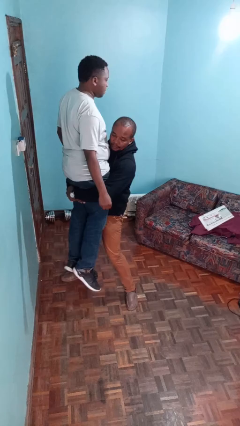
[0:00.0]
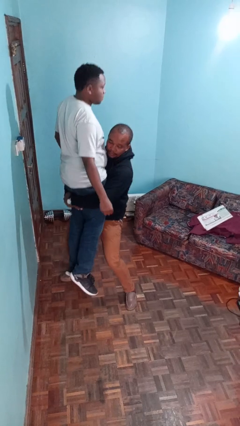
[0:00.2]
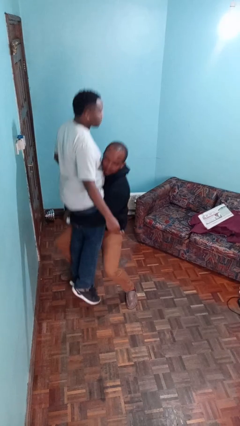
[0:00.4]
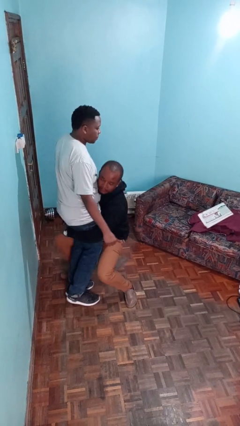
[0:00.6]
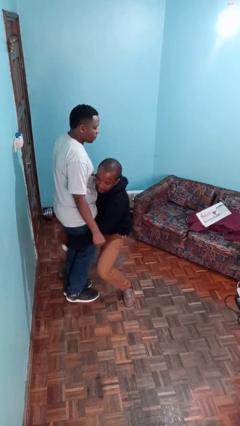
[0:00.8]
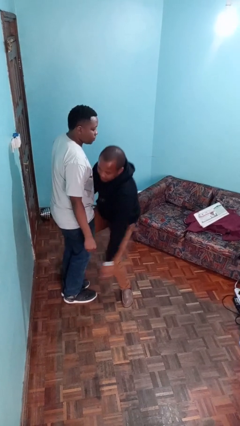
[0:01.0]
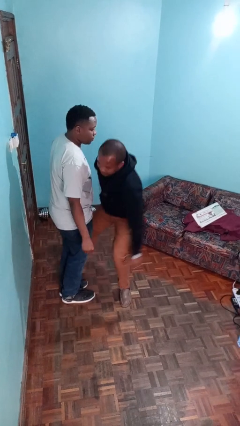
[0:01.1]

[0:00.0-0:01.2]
person puts down person

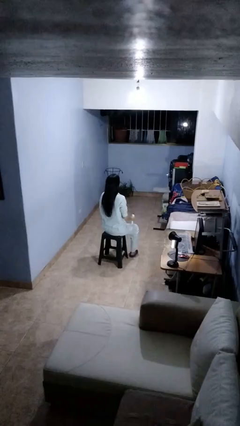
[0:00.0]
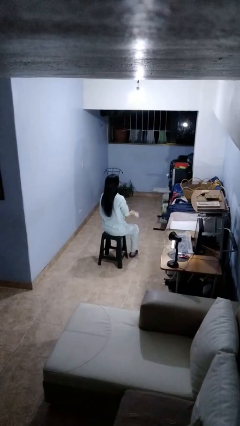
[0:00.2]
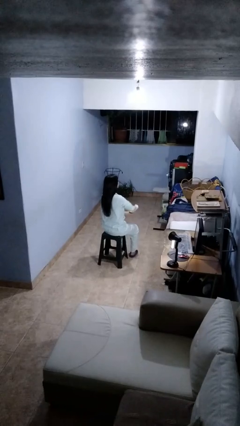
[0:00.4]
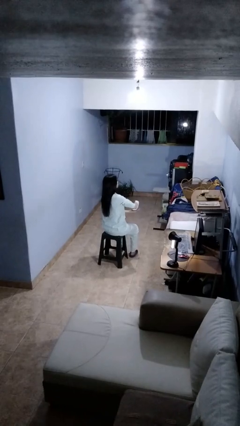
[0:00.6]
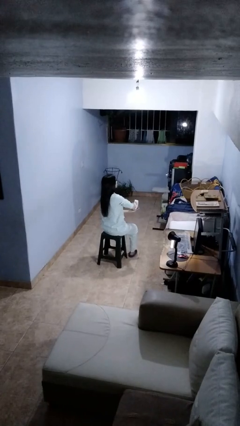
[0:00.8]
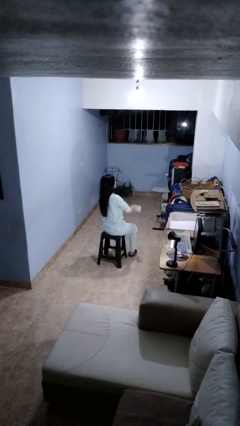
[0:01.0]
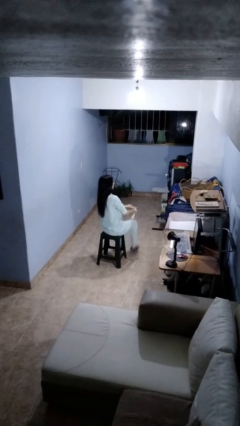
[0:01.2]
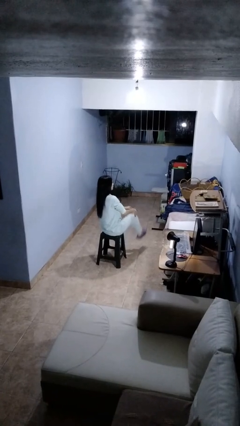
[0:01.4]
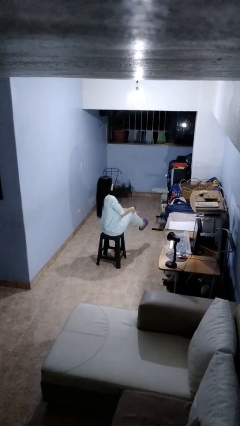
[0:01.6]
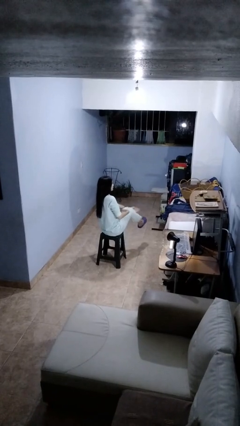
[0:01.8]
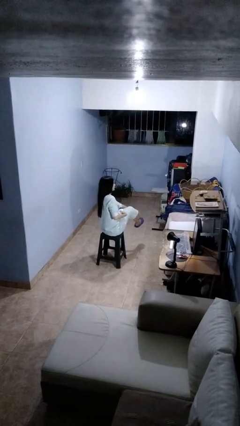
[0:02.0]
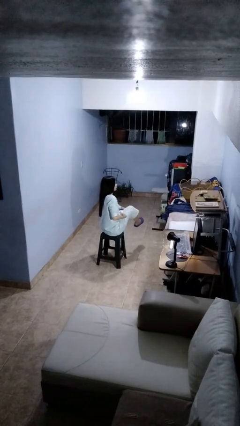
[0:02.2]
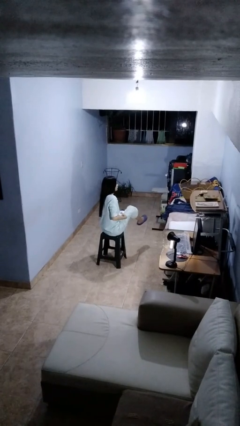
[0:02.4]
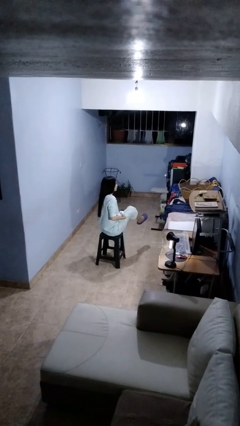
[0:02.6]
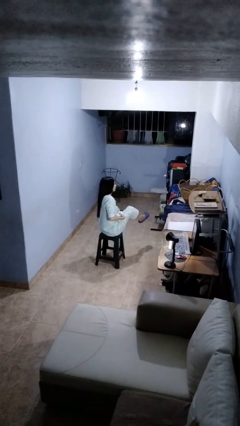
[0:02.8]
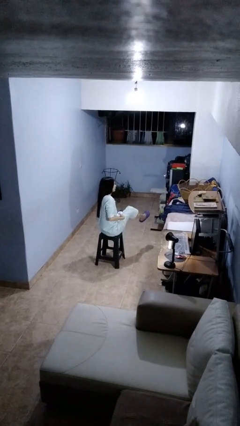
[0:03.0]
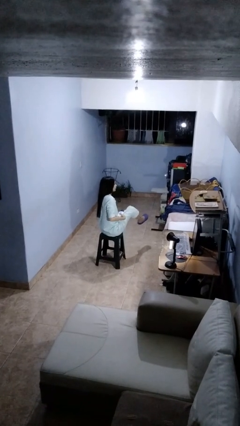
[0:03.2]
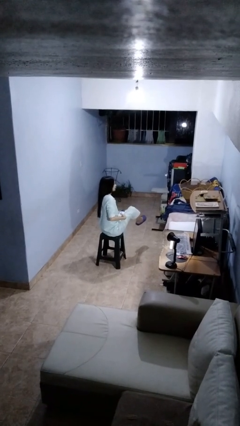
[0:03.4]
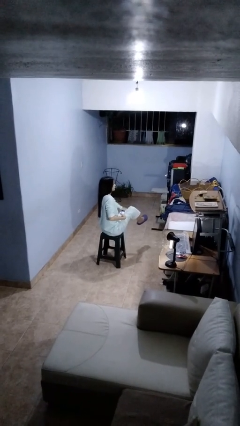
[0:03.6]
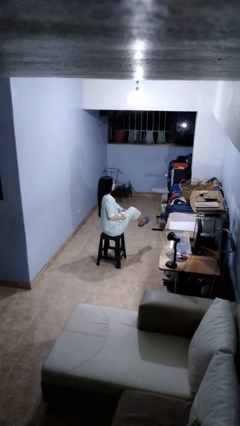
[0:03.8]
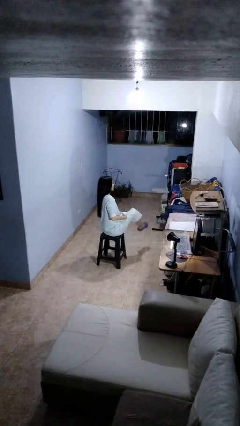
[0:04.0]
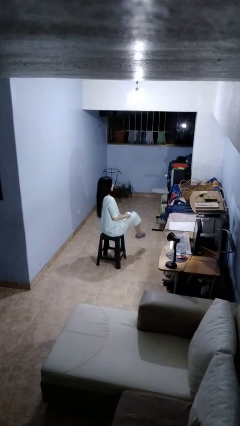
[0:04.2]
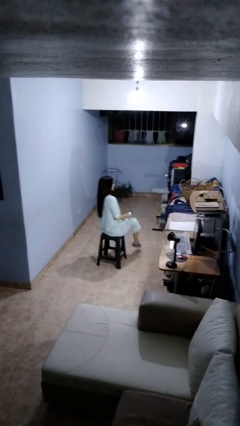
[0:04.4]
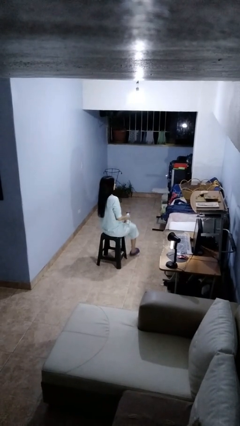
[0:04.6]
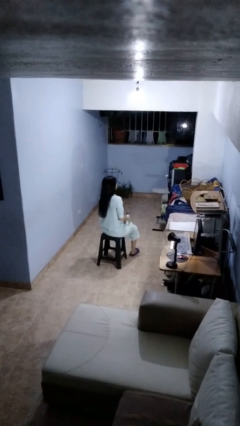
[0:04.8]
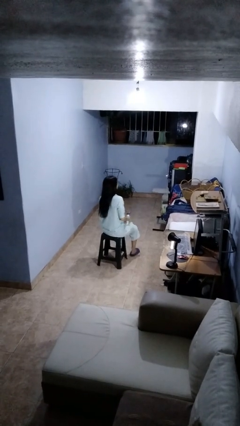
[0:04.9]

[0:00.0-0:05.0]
person applies sunscreen

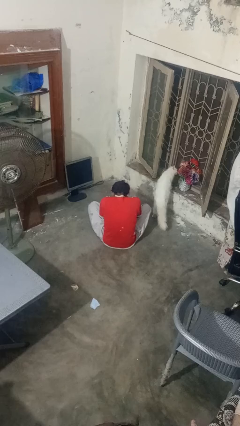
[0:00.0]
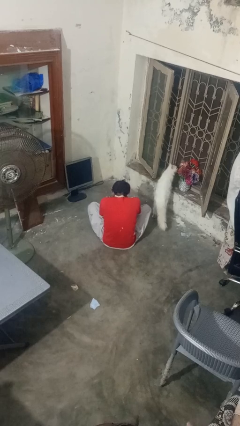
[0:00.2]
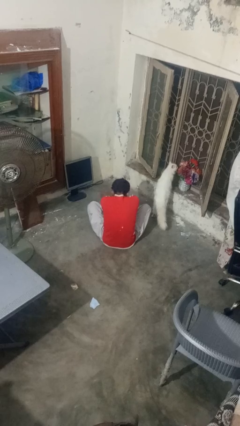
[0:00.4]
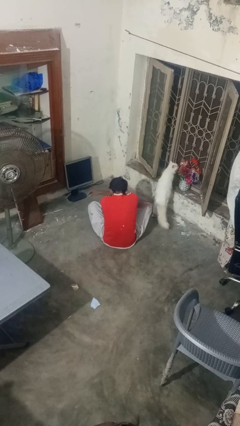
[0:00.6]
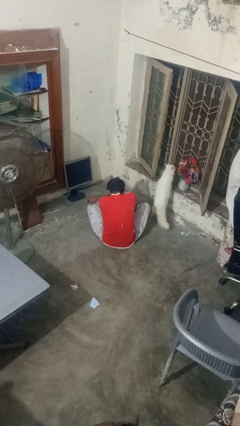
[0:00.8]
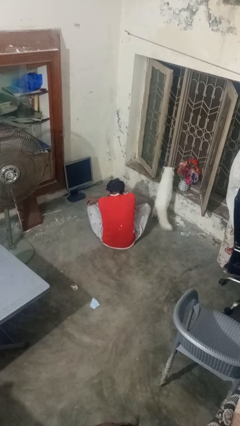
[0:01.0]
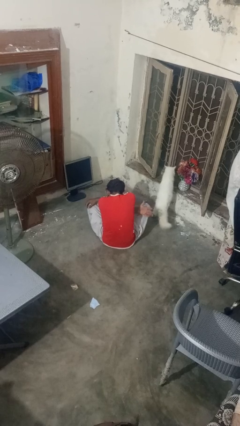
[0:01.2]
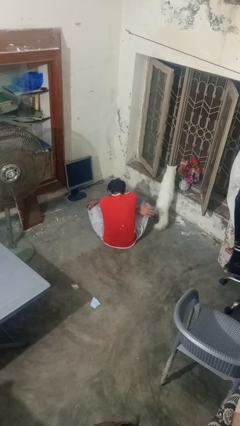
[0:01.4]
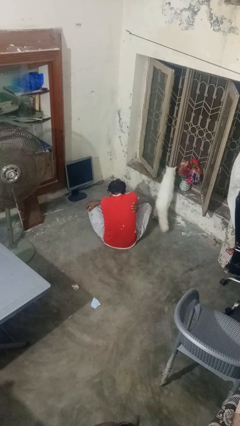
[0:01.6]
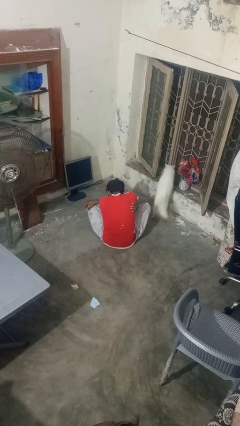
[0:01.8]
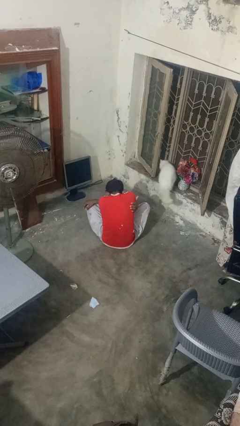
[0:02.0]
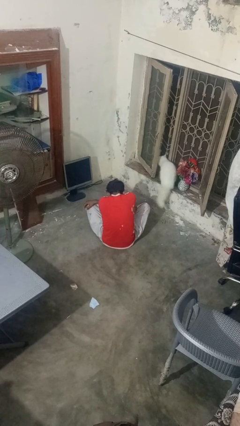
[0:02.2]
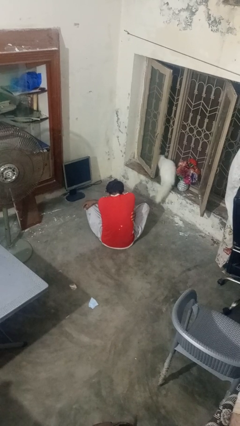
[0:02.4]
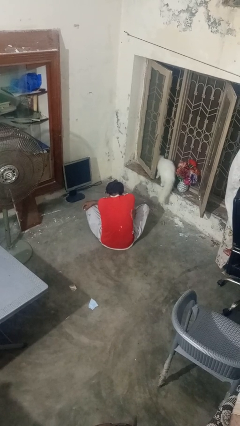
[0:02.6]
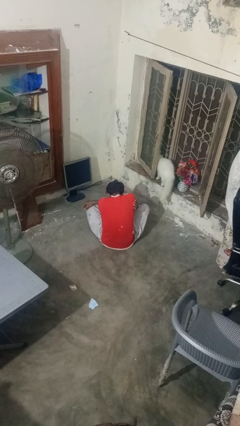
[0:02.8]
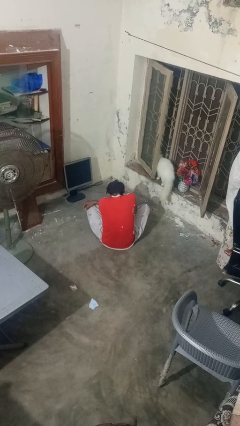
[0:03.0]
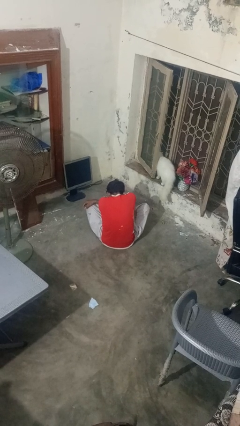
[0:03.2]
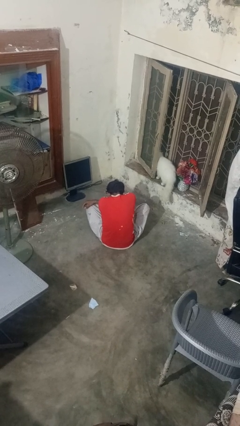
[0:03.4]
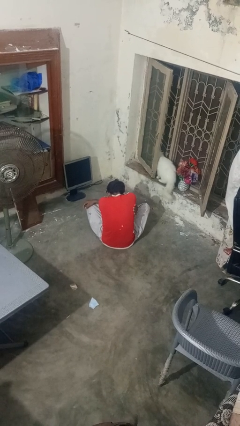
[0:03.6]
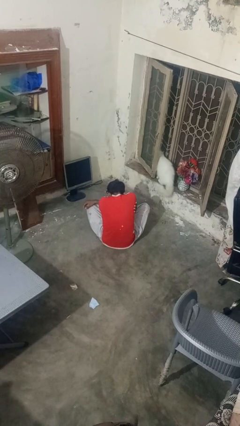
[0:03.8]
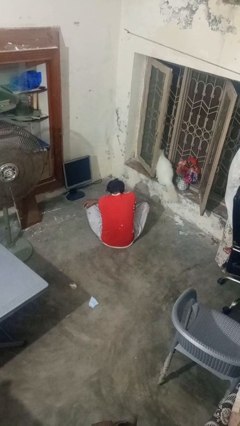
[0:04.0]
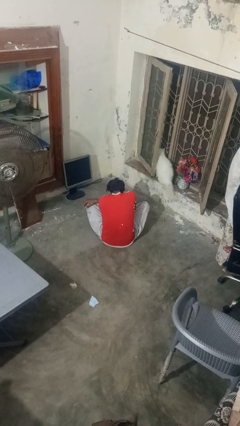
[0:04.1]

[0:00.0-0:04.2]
person swats bug

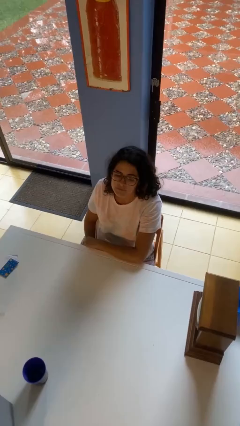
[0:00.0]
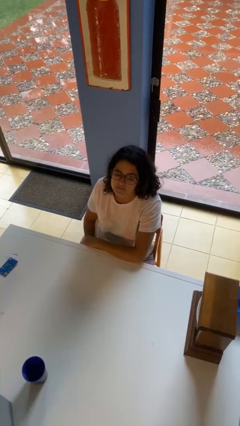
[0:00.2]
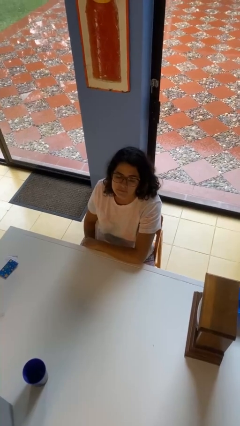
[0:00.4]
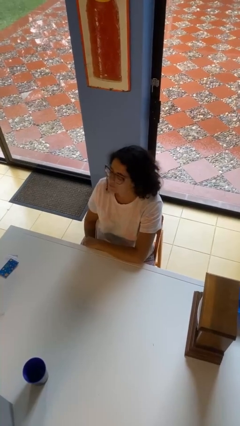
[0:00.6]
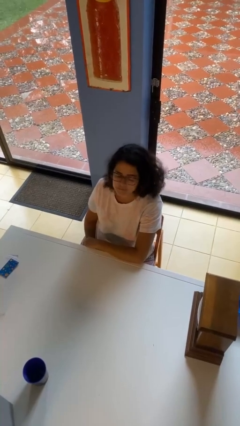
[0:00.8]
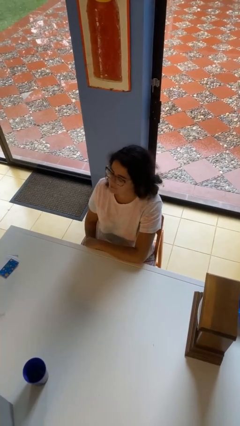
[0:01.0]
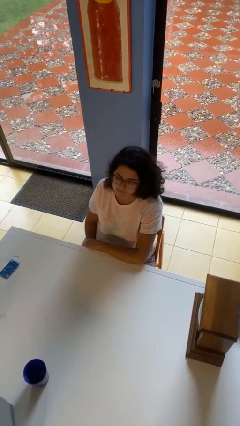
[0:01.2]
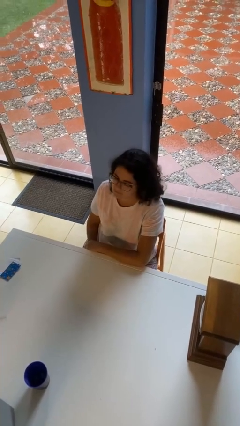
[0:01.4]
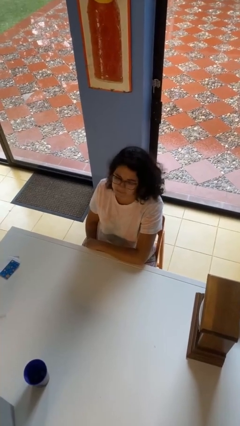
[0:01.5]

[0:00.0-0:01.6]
person shakes head

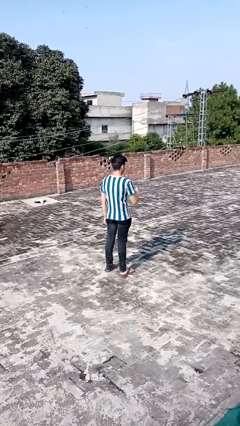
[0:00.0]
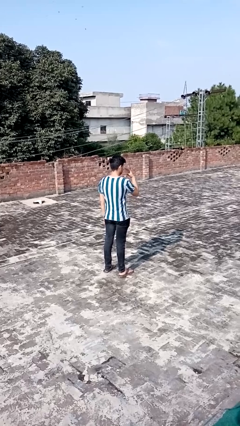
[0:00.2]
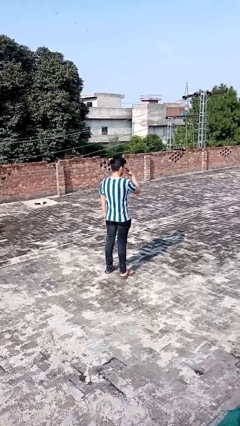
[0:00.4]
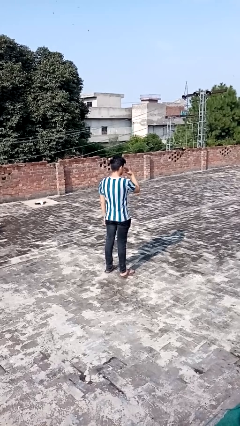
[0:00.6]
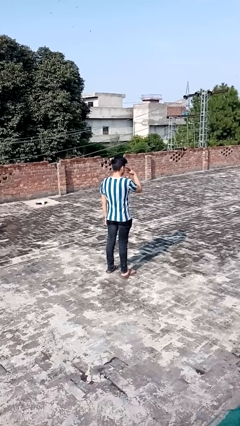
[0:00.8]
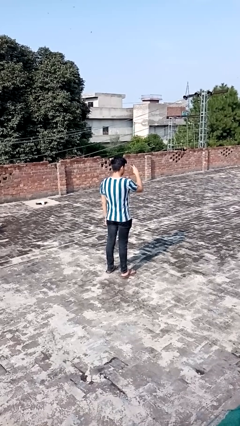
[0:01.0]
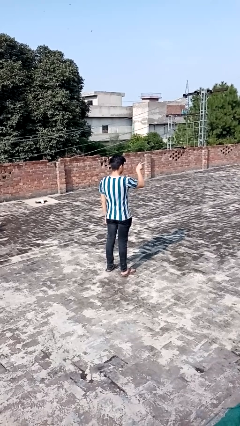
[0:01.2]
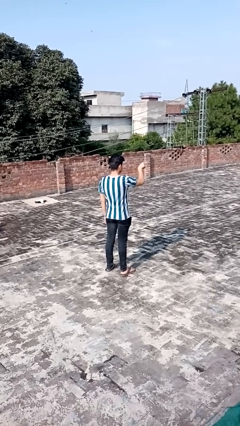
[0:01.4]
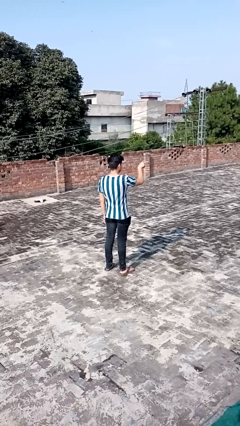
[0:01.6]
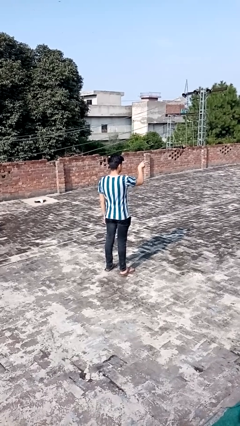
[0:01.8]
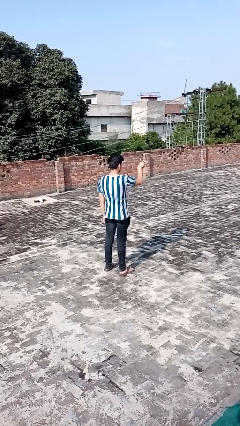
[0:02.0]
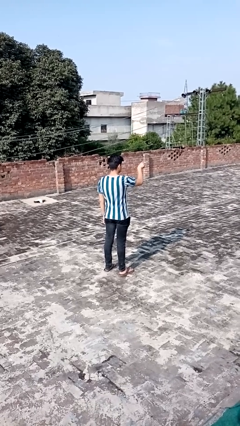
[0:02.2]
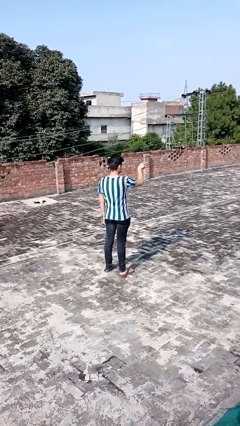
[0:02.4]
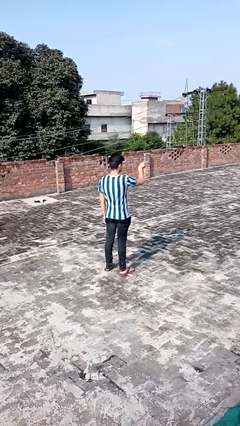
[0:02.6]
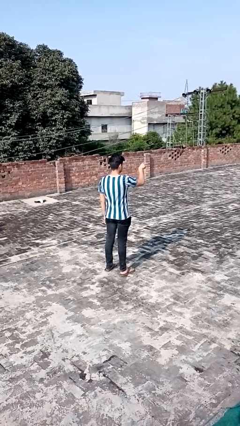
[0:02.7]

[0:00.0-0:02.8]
person gestures watch closely

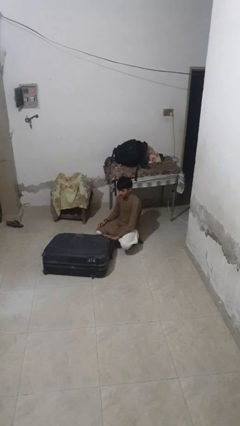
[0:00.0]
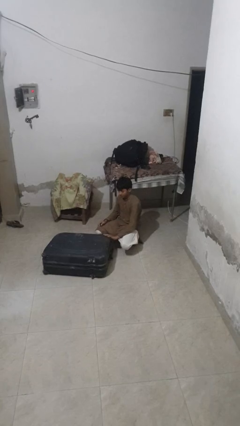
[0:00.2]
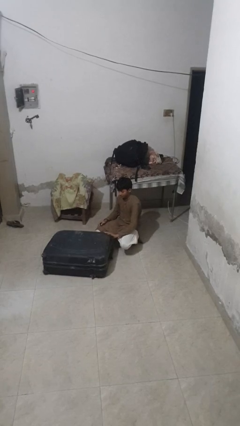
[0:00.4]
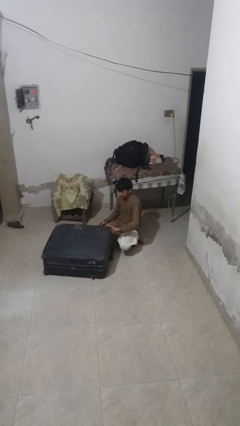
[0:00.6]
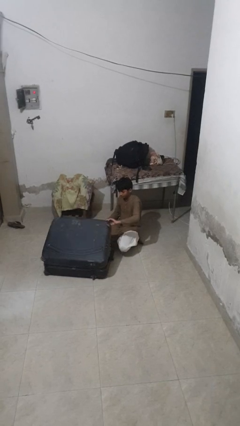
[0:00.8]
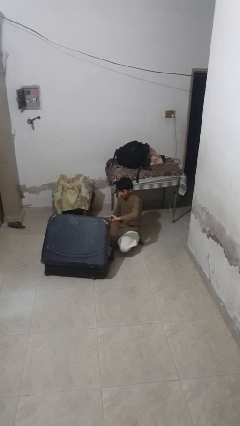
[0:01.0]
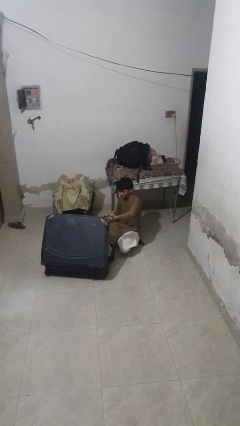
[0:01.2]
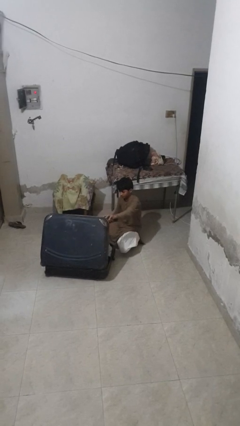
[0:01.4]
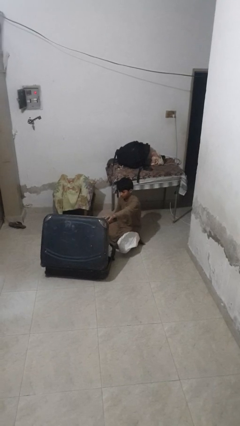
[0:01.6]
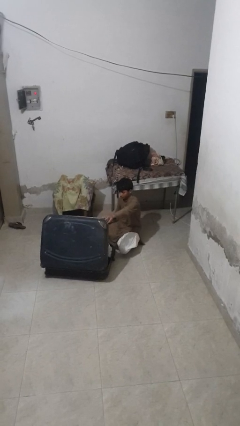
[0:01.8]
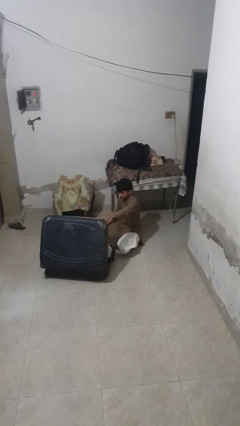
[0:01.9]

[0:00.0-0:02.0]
person opens suitcase

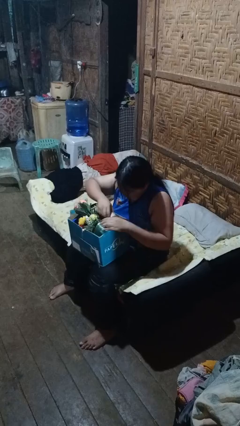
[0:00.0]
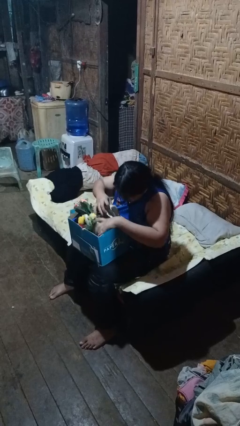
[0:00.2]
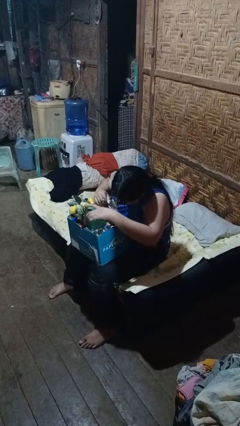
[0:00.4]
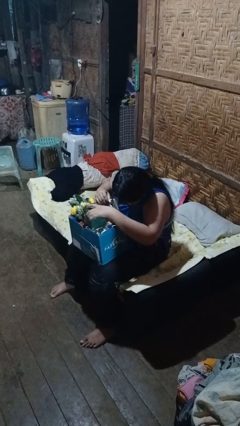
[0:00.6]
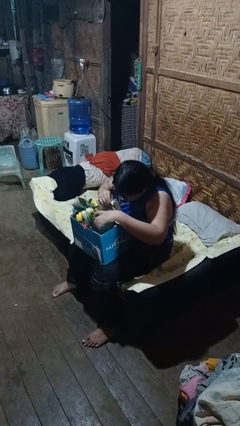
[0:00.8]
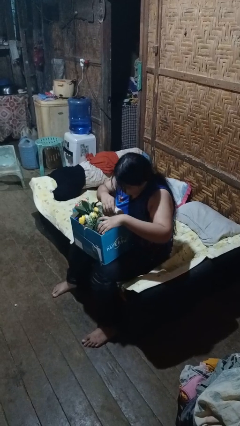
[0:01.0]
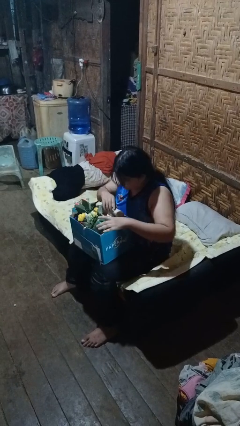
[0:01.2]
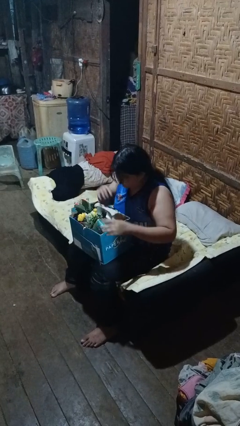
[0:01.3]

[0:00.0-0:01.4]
person searches in box
